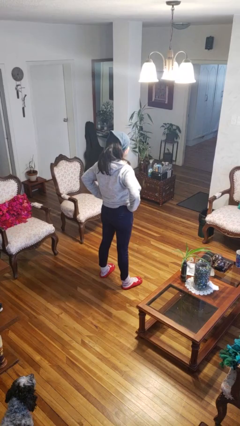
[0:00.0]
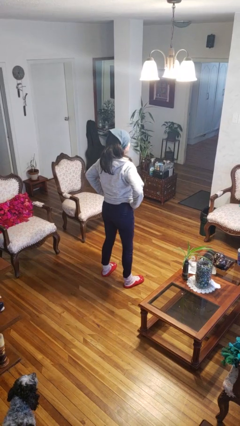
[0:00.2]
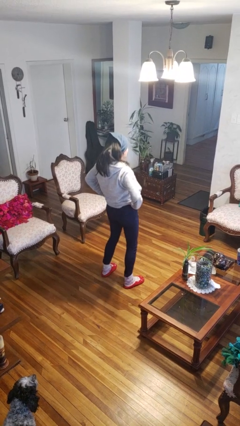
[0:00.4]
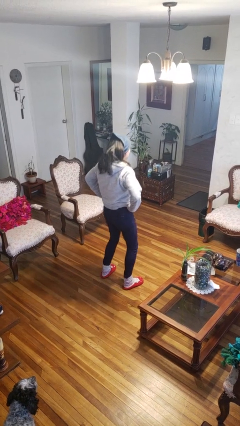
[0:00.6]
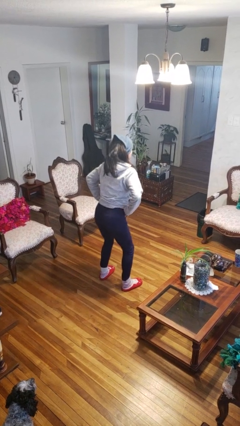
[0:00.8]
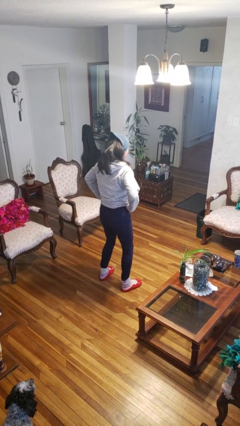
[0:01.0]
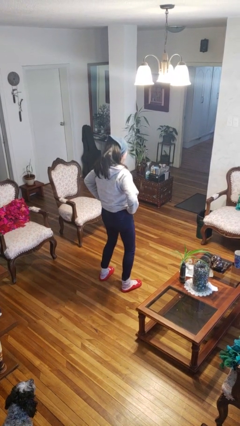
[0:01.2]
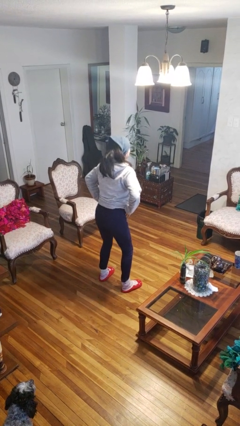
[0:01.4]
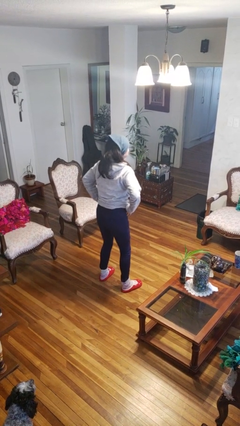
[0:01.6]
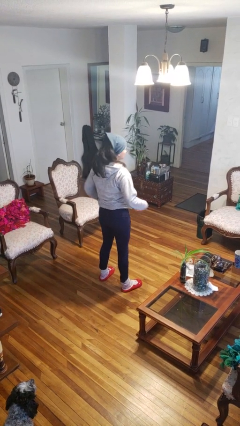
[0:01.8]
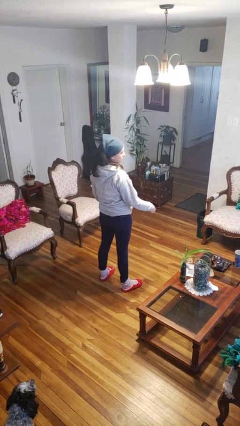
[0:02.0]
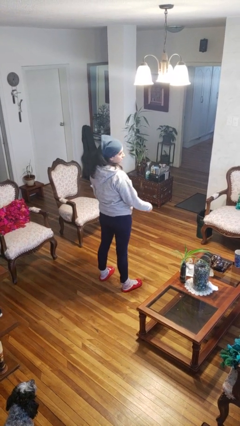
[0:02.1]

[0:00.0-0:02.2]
person wiggles hips

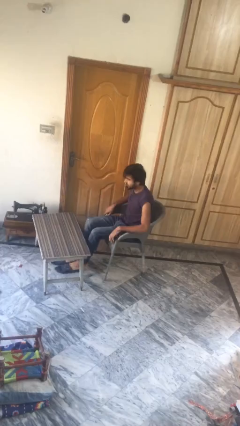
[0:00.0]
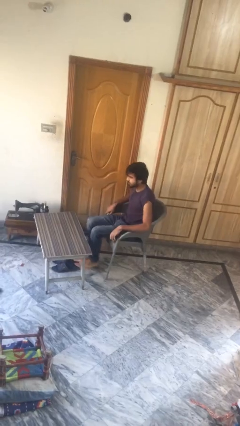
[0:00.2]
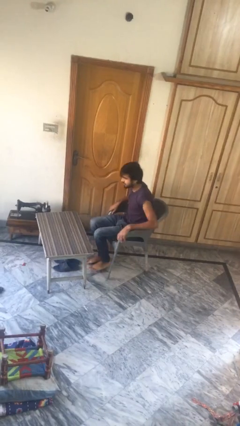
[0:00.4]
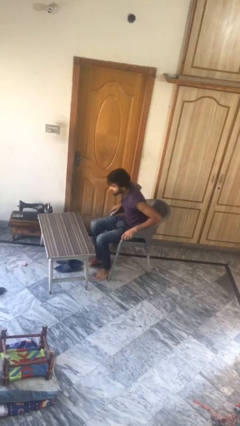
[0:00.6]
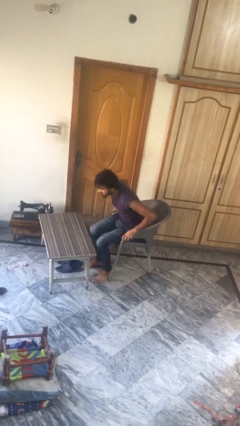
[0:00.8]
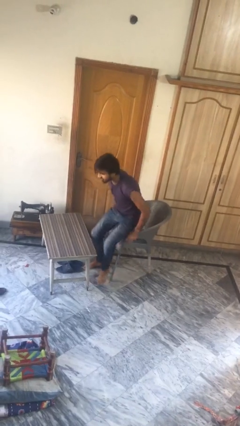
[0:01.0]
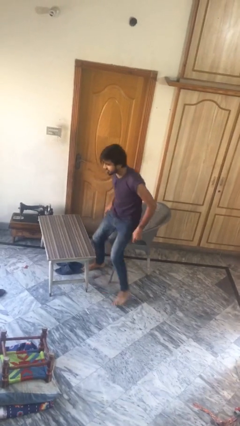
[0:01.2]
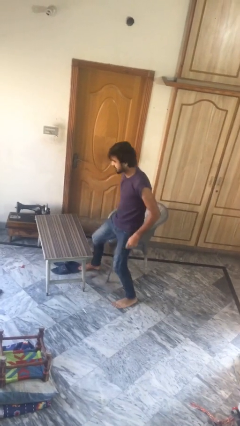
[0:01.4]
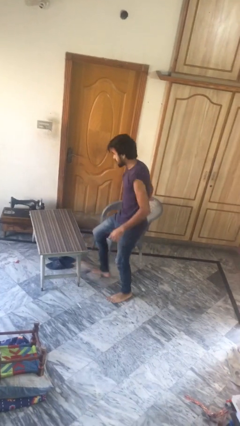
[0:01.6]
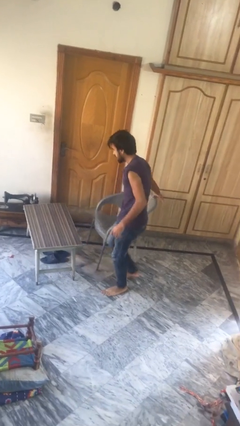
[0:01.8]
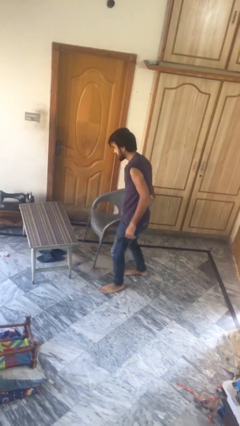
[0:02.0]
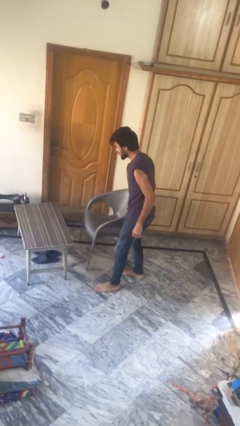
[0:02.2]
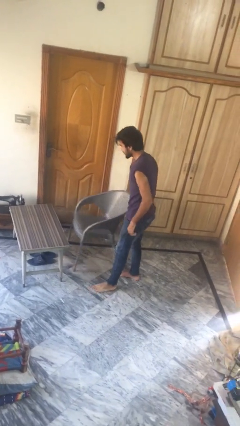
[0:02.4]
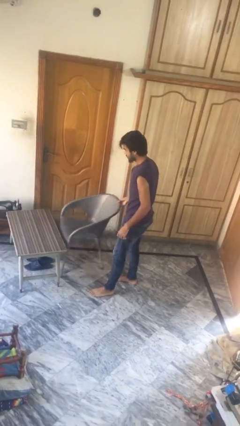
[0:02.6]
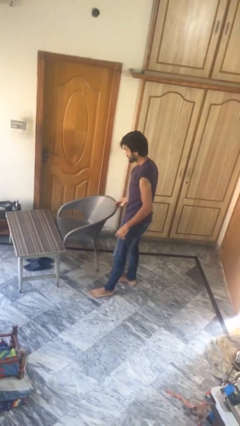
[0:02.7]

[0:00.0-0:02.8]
person stands up

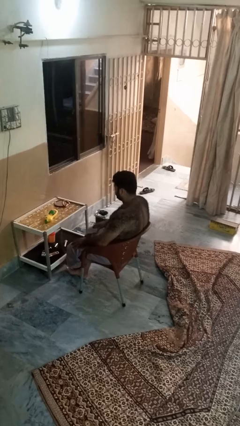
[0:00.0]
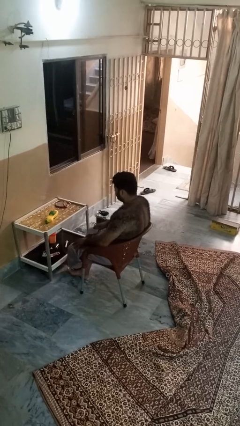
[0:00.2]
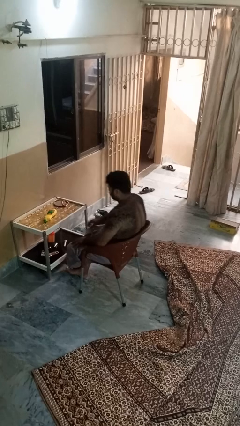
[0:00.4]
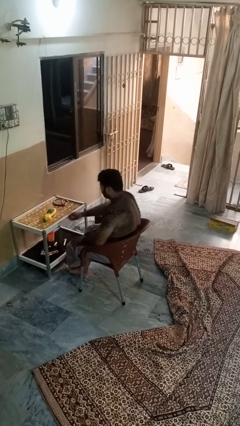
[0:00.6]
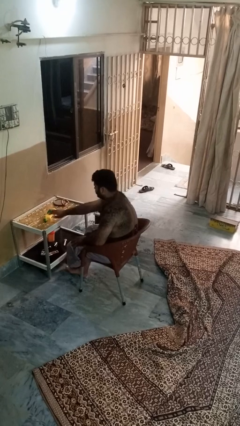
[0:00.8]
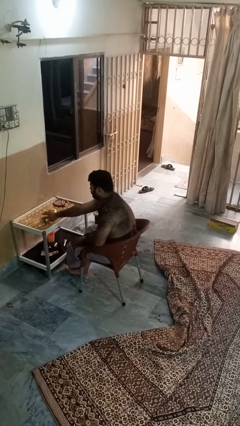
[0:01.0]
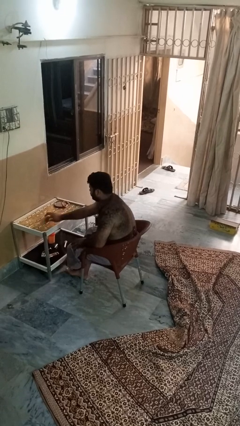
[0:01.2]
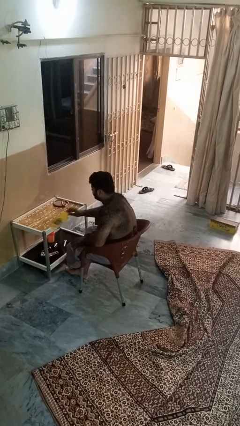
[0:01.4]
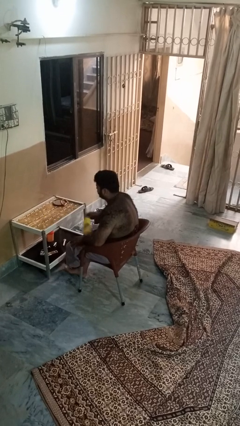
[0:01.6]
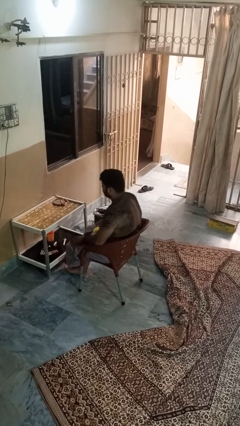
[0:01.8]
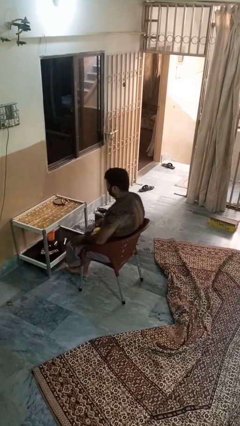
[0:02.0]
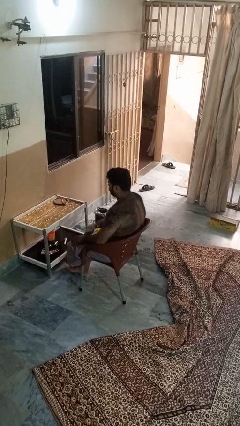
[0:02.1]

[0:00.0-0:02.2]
person picks up object from table

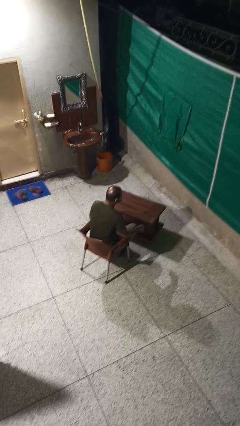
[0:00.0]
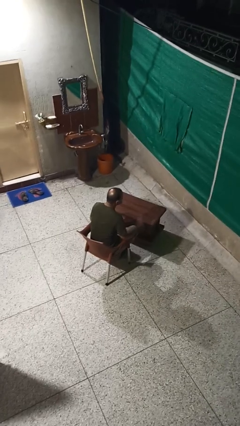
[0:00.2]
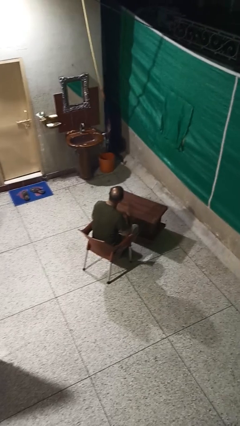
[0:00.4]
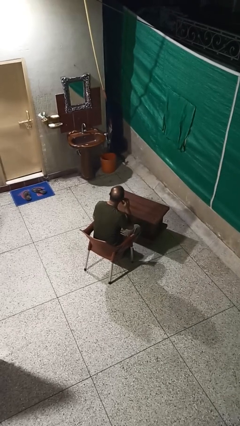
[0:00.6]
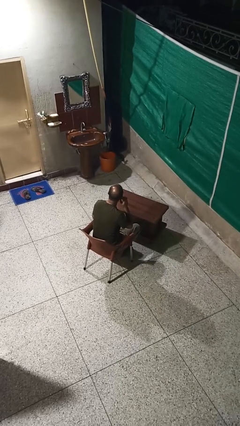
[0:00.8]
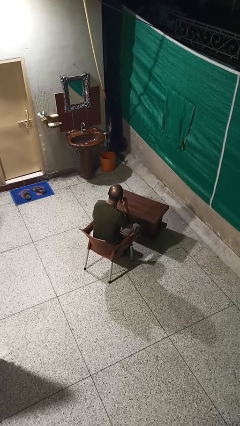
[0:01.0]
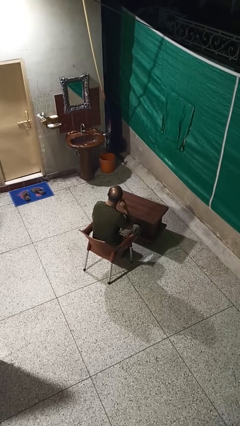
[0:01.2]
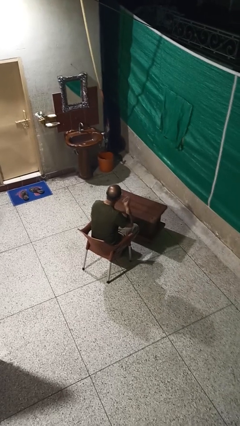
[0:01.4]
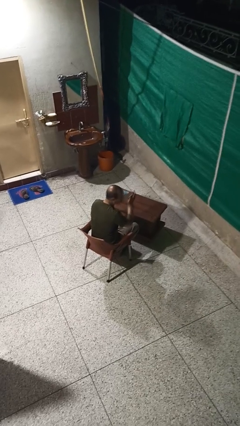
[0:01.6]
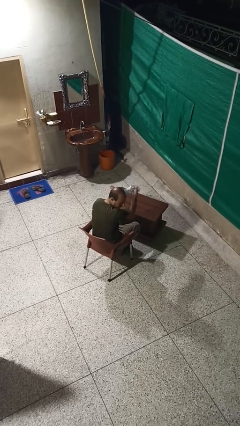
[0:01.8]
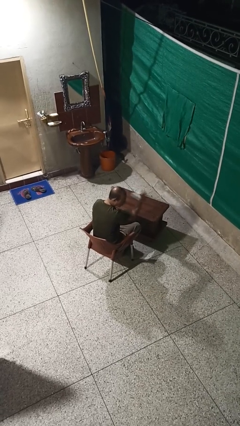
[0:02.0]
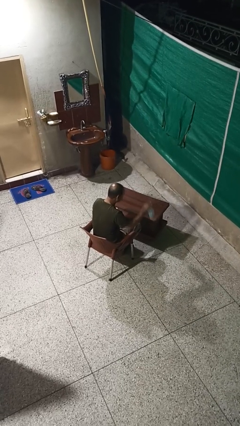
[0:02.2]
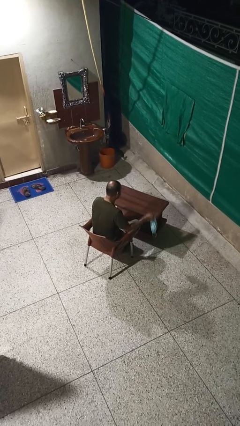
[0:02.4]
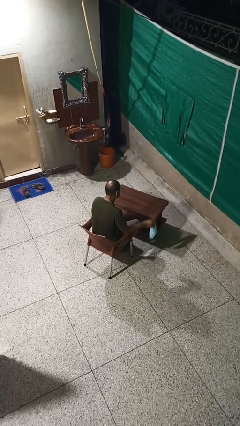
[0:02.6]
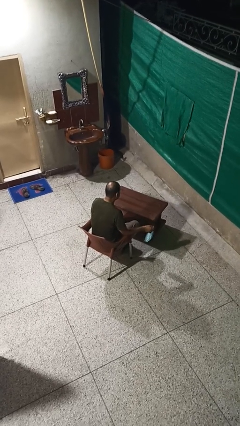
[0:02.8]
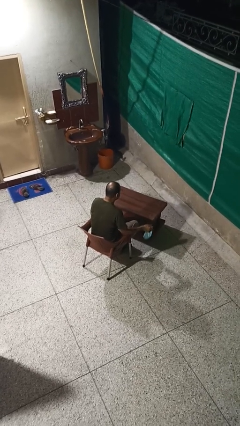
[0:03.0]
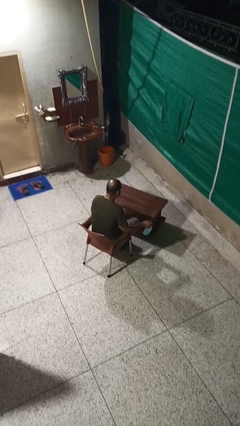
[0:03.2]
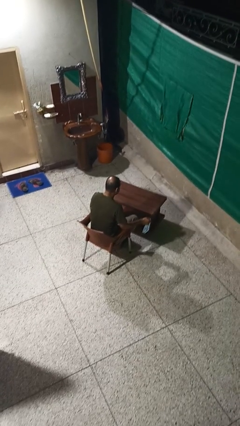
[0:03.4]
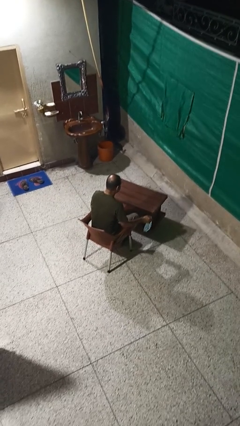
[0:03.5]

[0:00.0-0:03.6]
person takes off facemask

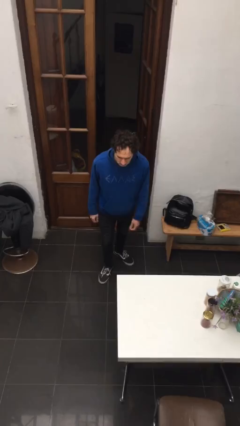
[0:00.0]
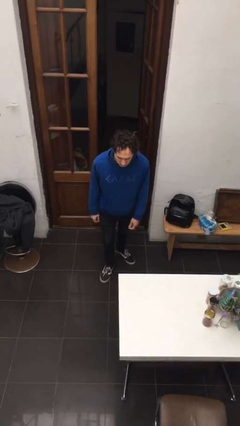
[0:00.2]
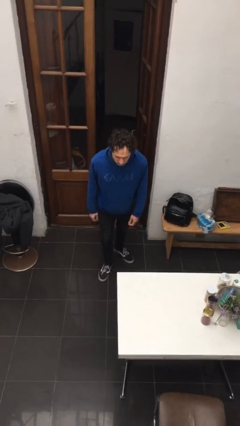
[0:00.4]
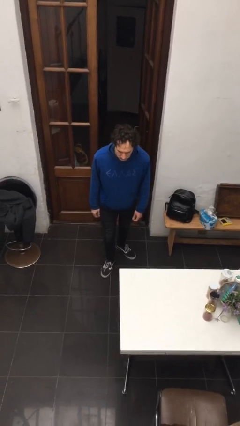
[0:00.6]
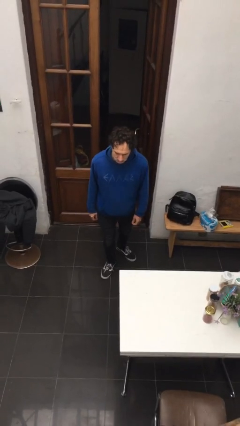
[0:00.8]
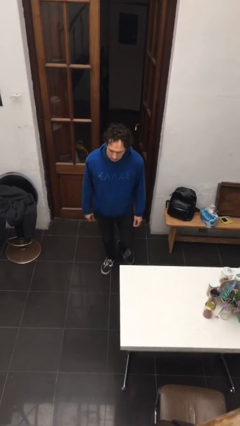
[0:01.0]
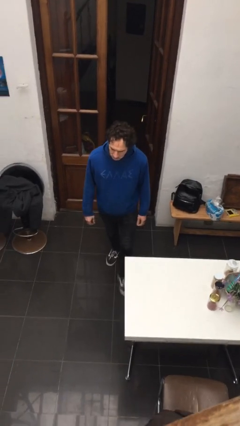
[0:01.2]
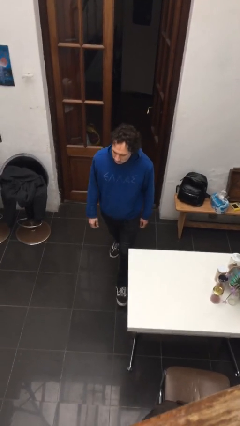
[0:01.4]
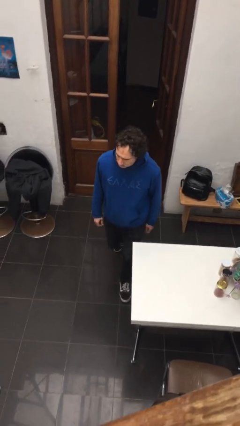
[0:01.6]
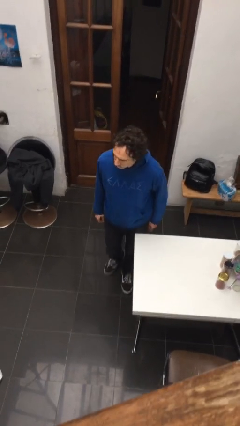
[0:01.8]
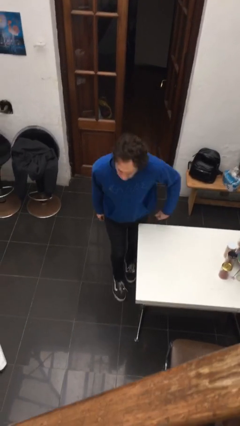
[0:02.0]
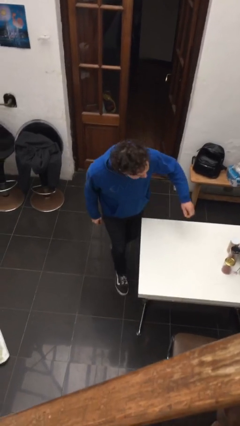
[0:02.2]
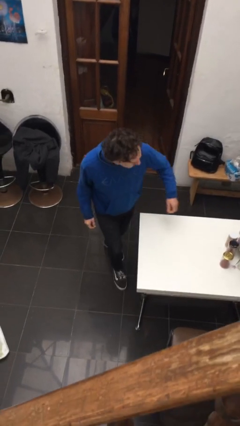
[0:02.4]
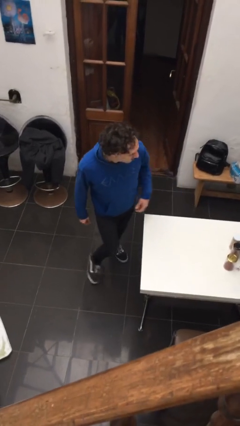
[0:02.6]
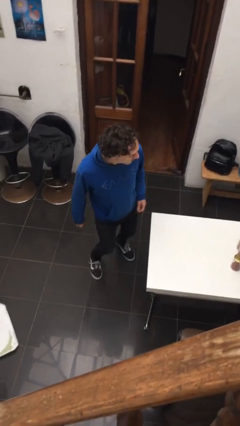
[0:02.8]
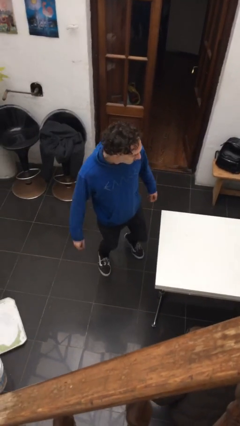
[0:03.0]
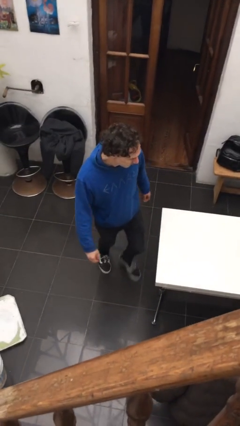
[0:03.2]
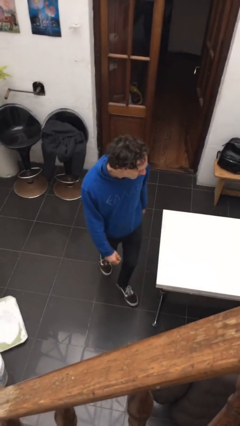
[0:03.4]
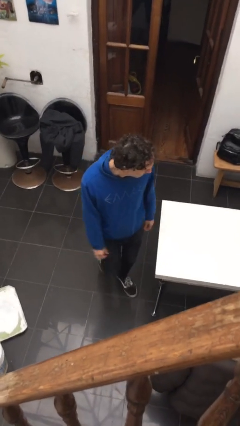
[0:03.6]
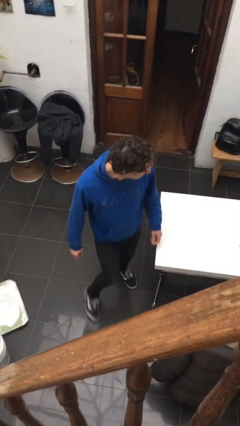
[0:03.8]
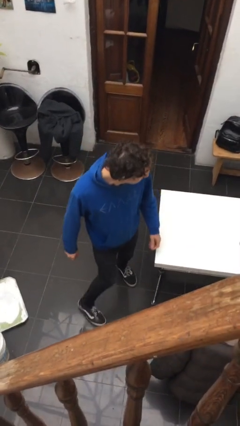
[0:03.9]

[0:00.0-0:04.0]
person bumps into table

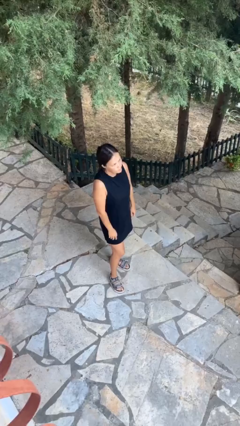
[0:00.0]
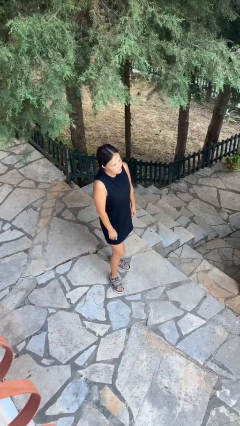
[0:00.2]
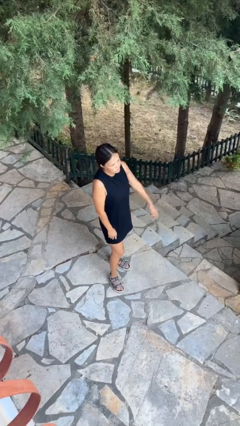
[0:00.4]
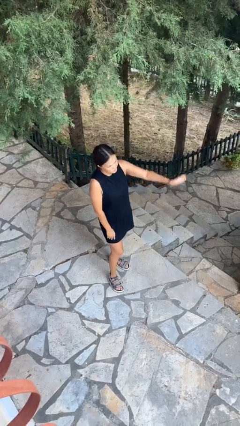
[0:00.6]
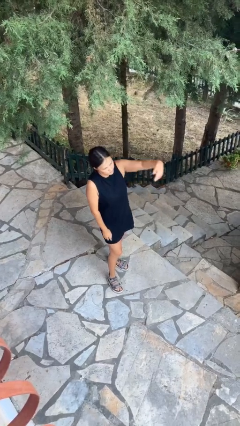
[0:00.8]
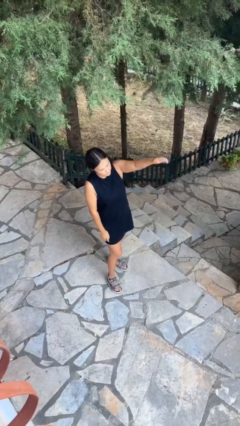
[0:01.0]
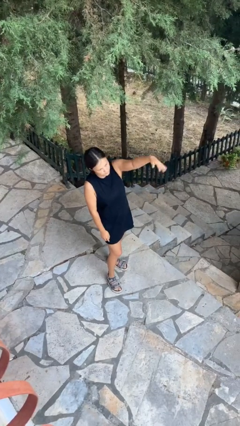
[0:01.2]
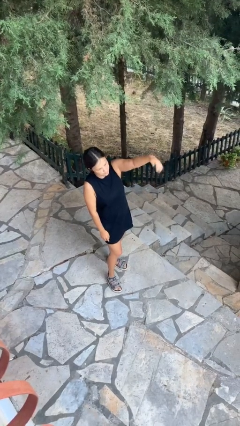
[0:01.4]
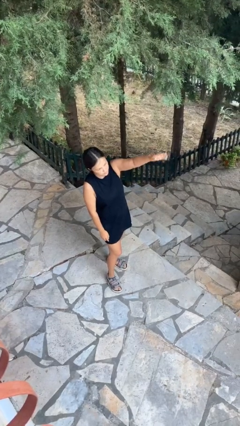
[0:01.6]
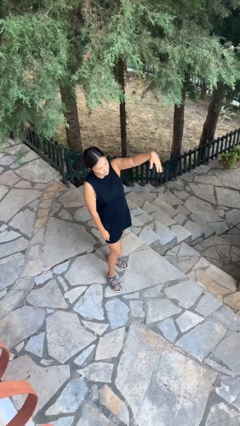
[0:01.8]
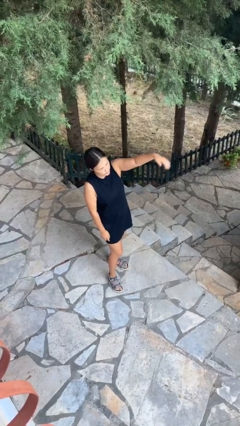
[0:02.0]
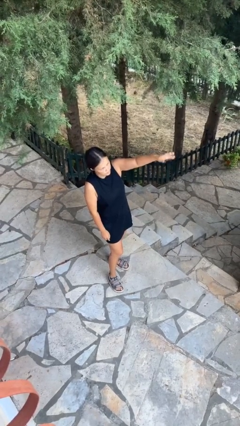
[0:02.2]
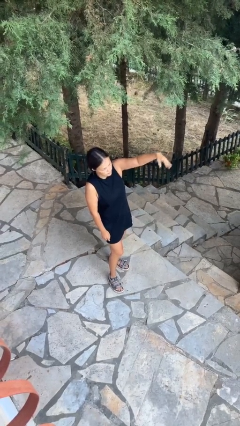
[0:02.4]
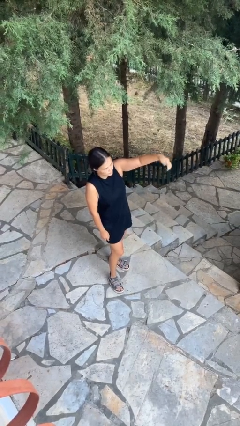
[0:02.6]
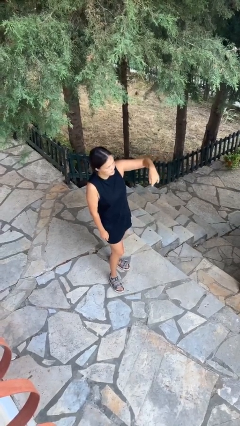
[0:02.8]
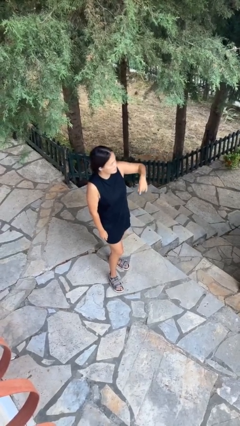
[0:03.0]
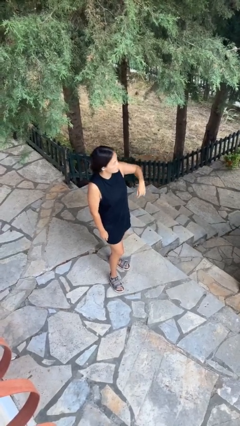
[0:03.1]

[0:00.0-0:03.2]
person gestures come here
